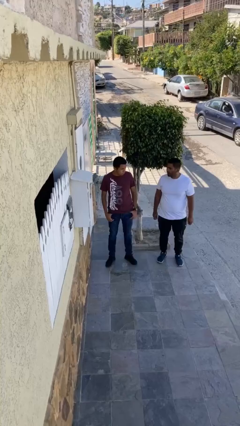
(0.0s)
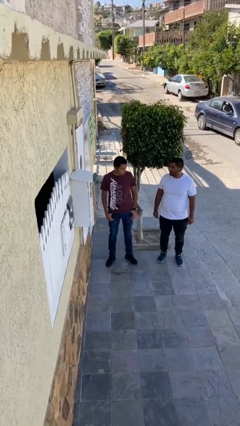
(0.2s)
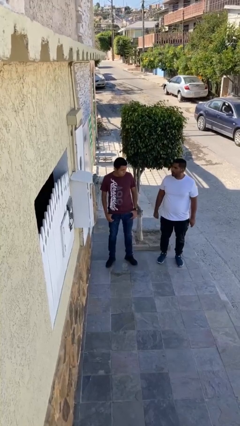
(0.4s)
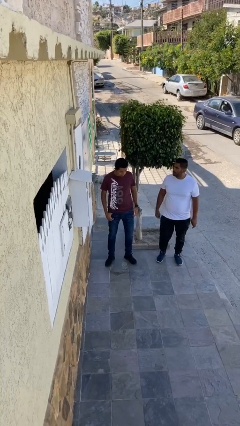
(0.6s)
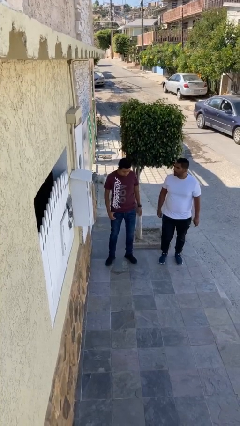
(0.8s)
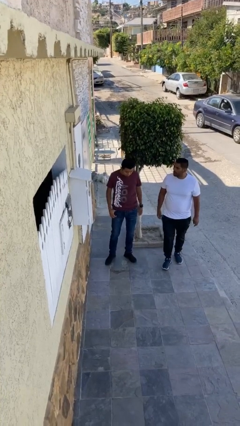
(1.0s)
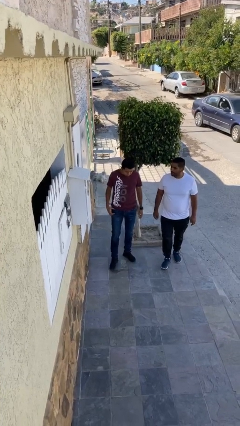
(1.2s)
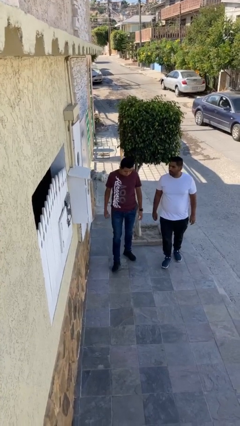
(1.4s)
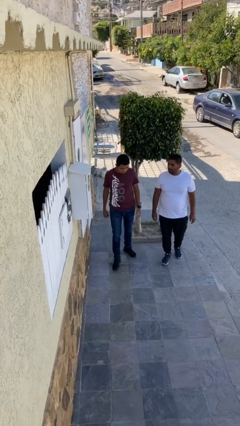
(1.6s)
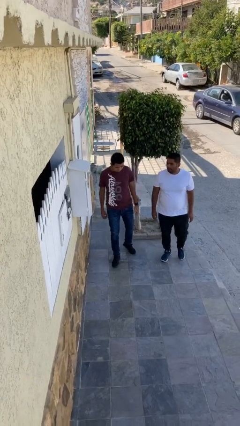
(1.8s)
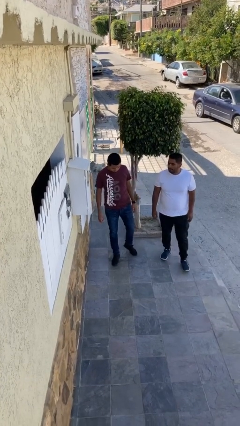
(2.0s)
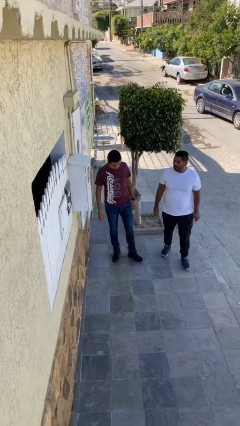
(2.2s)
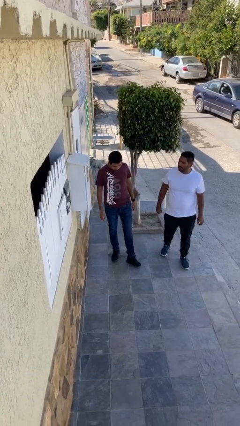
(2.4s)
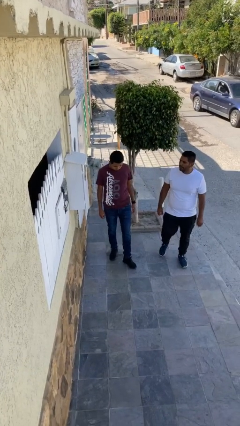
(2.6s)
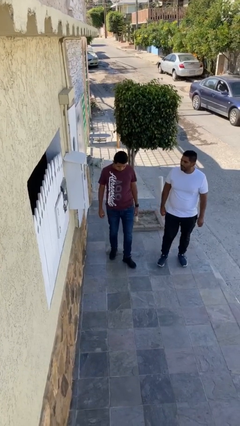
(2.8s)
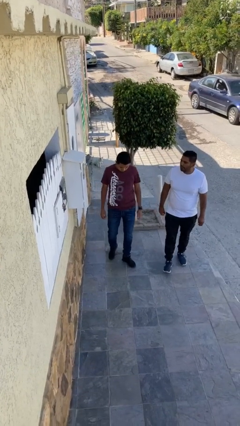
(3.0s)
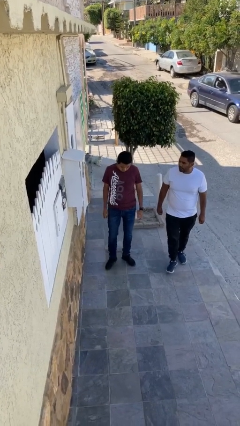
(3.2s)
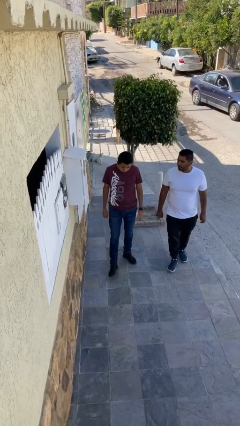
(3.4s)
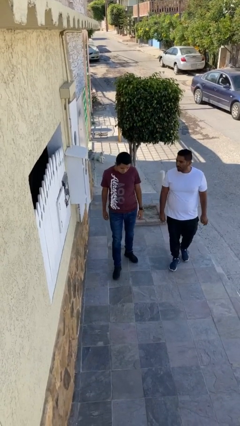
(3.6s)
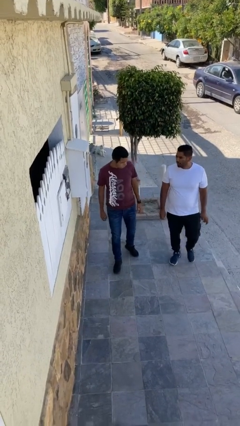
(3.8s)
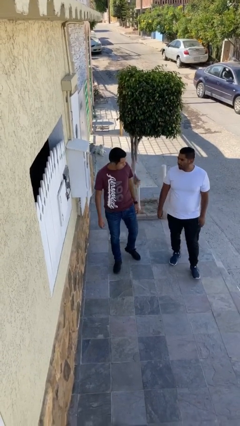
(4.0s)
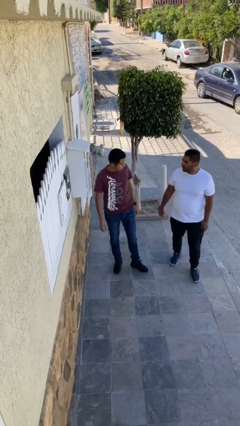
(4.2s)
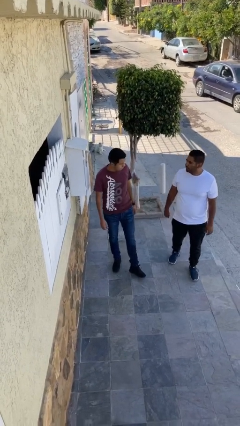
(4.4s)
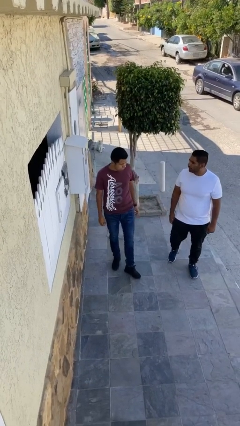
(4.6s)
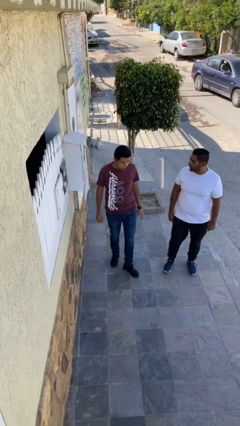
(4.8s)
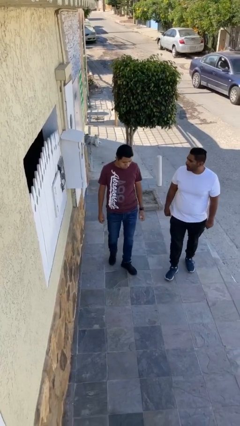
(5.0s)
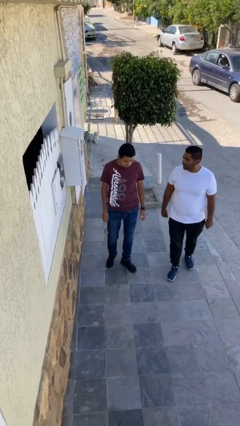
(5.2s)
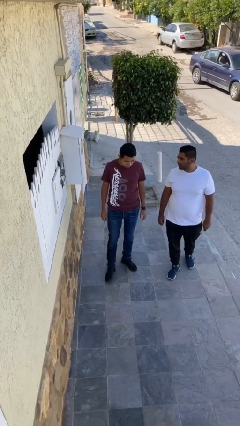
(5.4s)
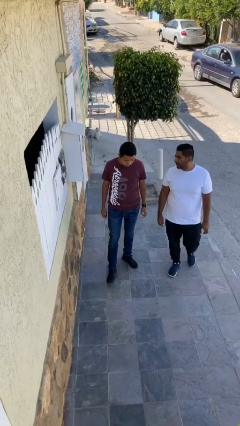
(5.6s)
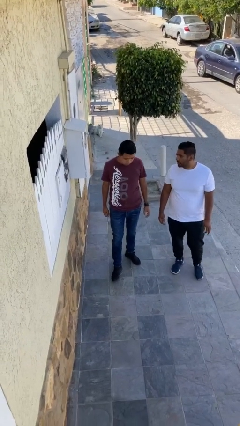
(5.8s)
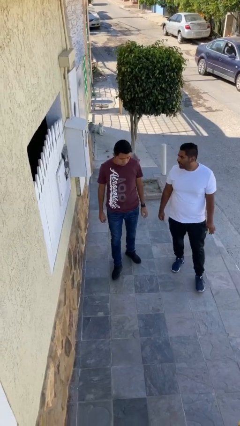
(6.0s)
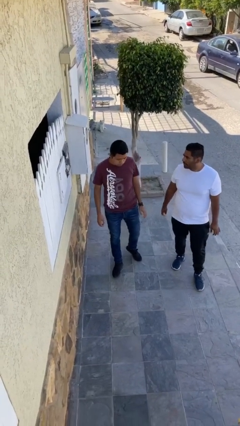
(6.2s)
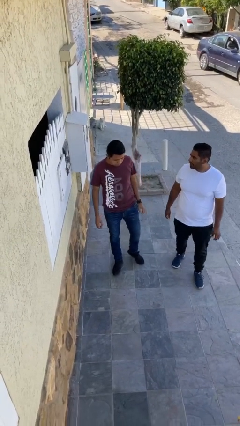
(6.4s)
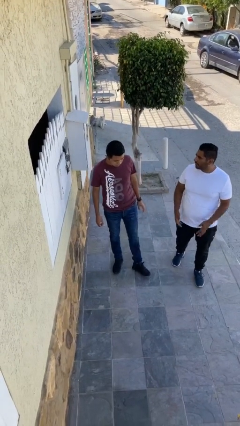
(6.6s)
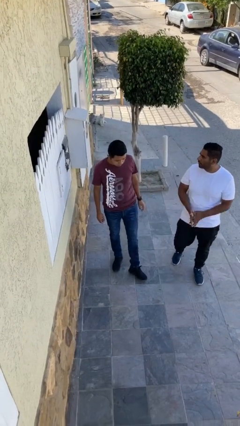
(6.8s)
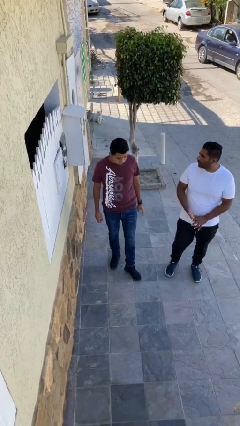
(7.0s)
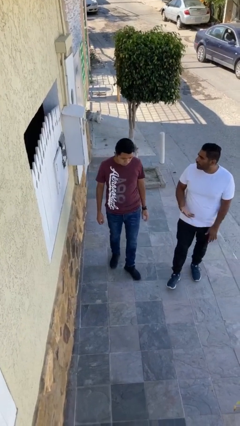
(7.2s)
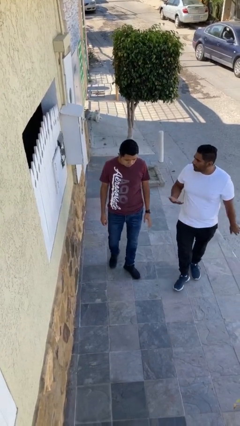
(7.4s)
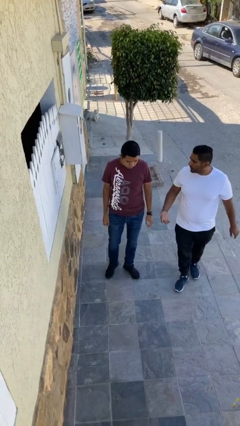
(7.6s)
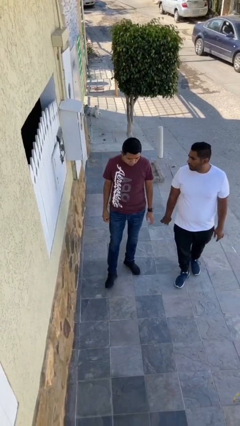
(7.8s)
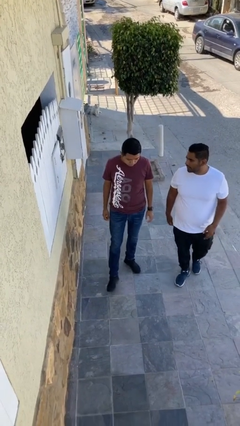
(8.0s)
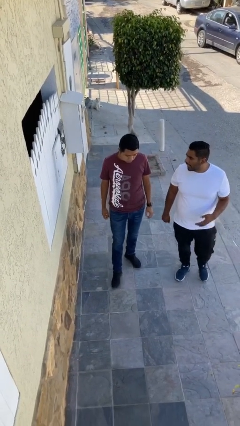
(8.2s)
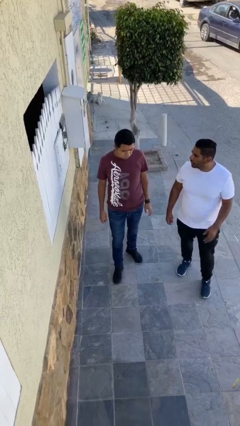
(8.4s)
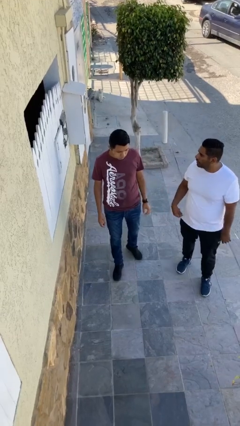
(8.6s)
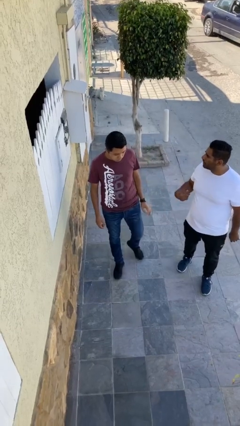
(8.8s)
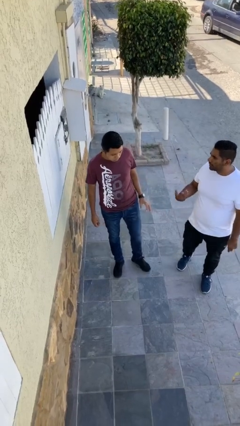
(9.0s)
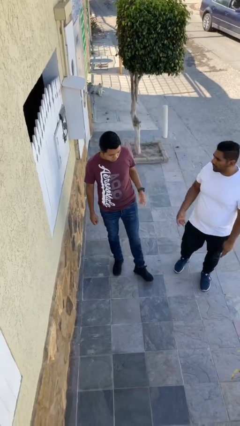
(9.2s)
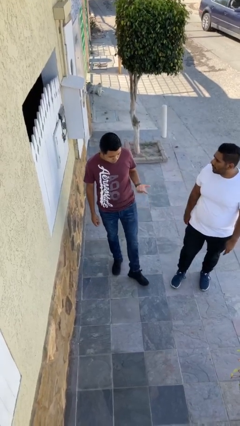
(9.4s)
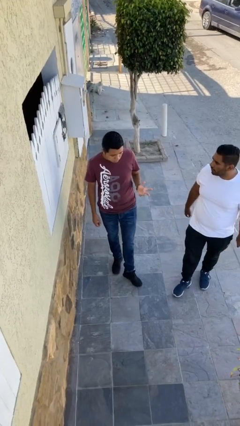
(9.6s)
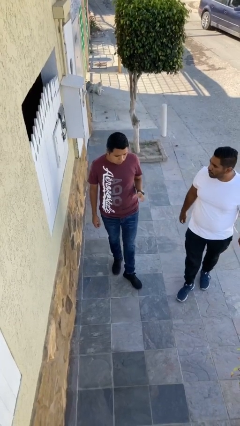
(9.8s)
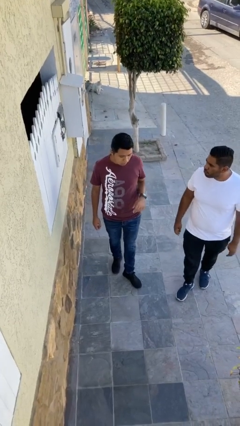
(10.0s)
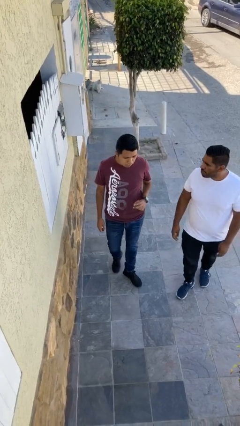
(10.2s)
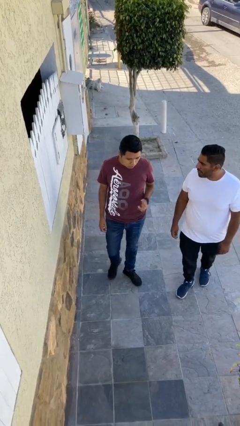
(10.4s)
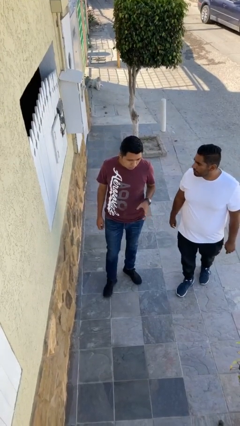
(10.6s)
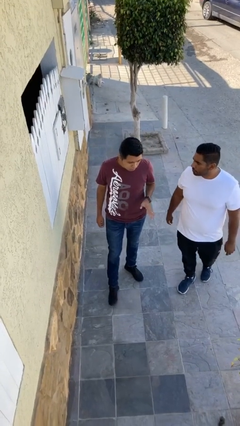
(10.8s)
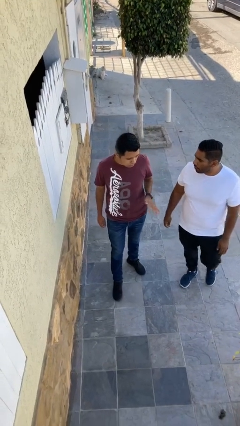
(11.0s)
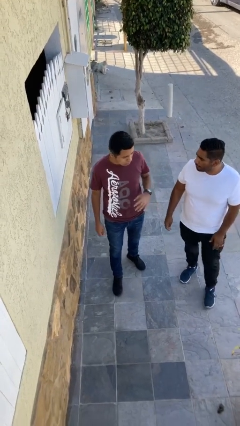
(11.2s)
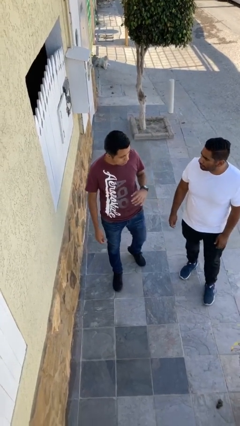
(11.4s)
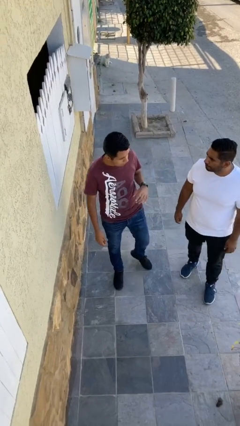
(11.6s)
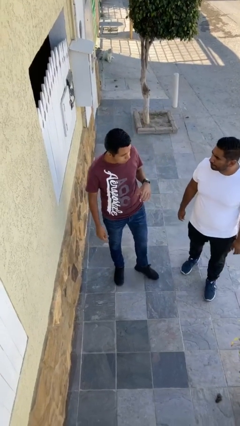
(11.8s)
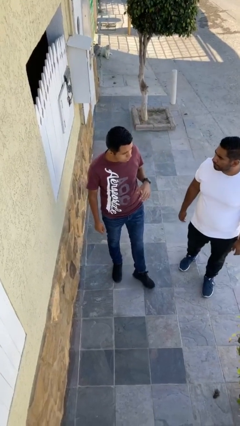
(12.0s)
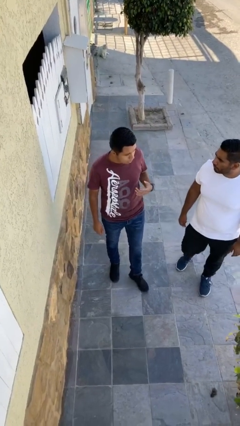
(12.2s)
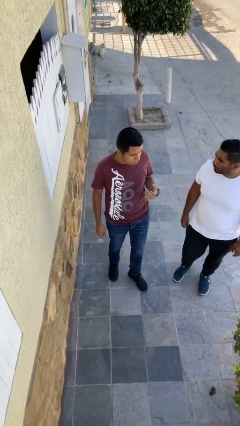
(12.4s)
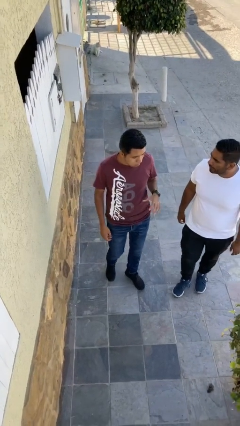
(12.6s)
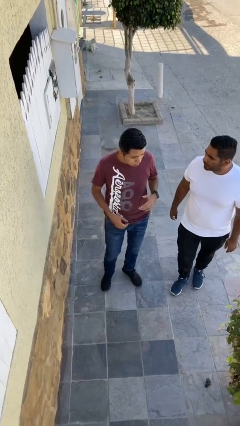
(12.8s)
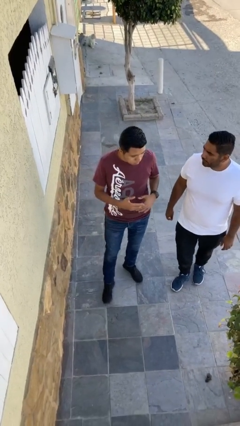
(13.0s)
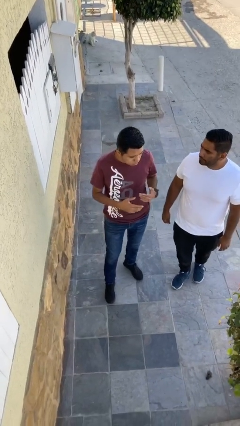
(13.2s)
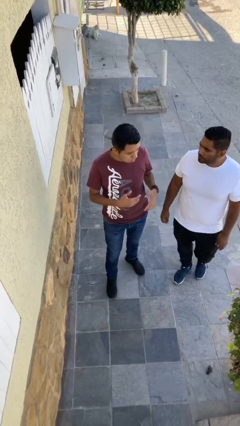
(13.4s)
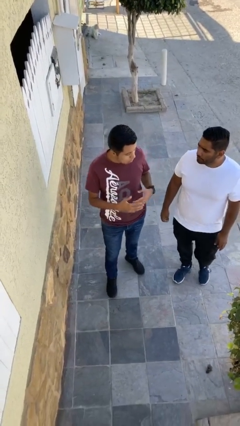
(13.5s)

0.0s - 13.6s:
person talks to person

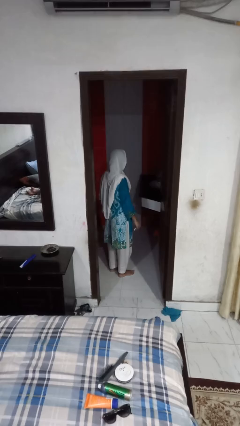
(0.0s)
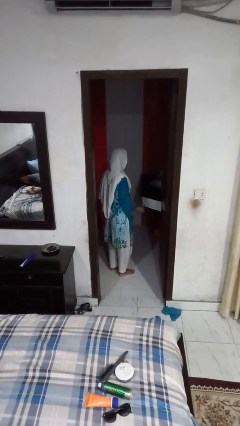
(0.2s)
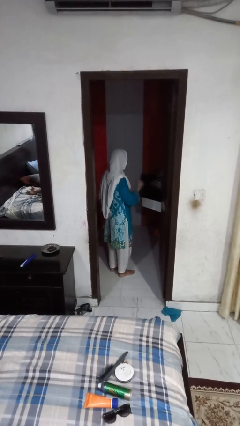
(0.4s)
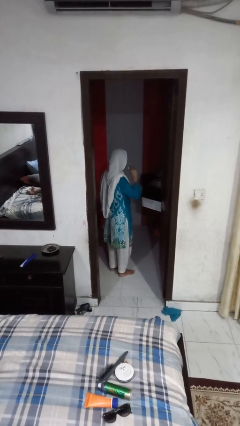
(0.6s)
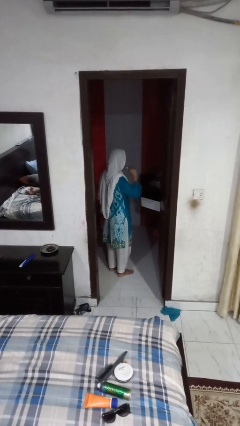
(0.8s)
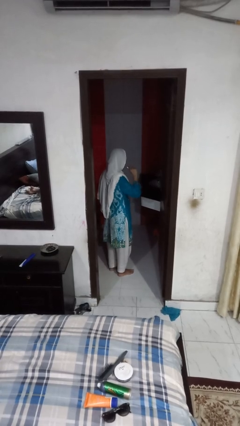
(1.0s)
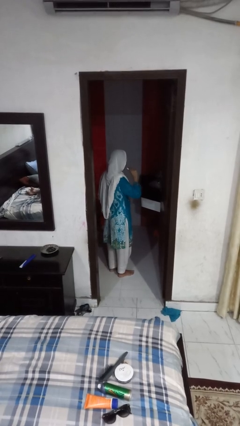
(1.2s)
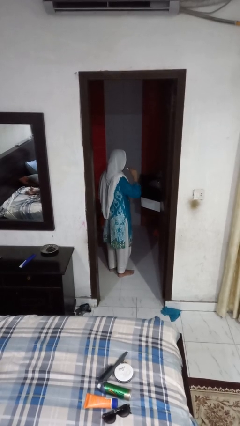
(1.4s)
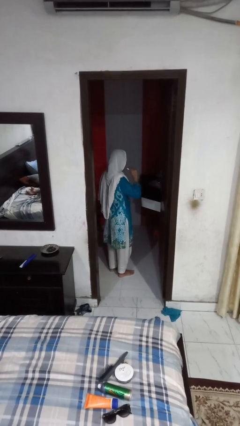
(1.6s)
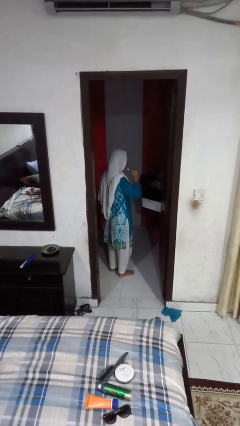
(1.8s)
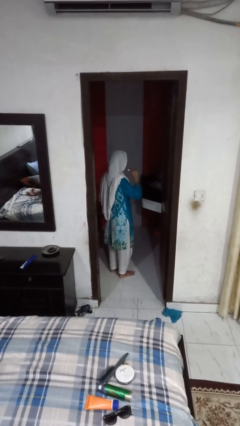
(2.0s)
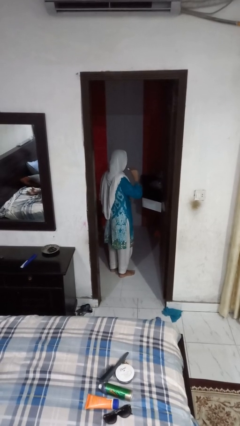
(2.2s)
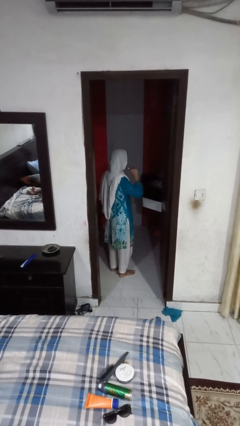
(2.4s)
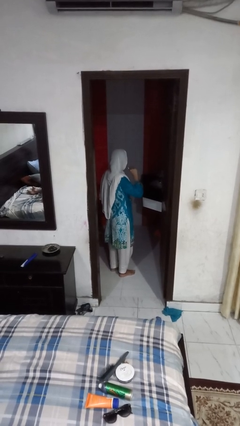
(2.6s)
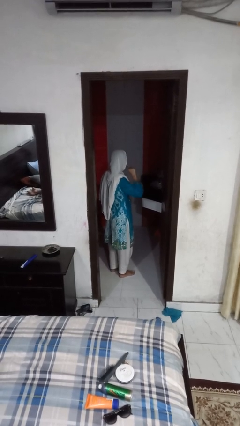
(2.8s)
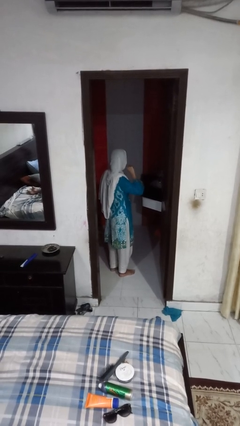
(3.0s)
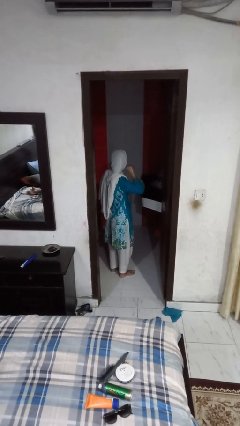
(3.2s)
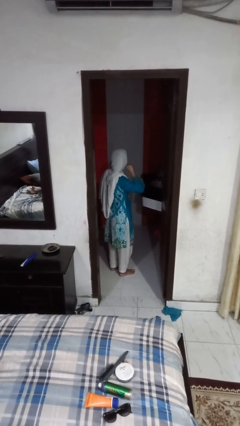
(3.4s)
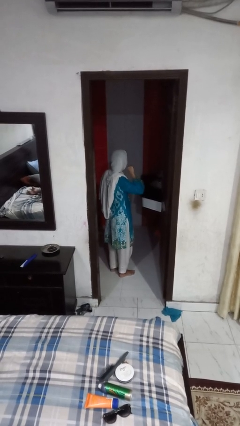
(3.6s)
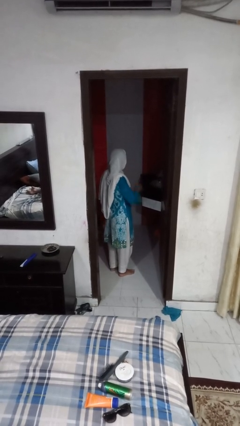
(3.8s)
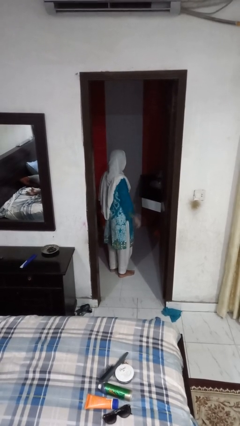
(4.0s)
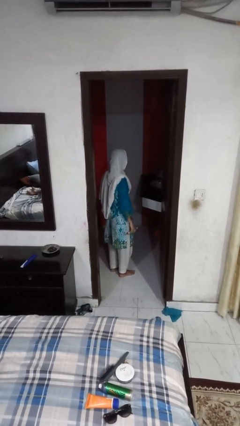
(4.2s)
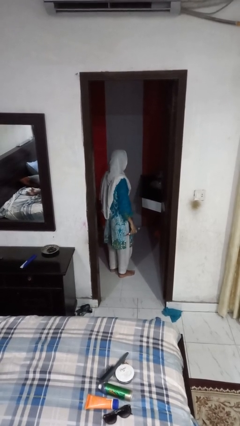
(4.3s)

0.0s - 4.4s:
person brushes teeth

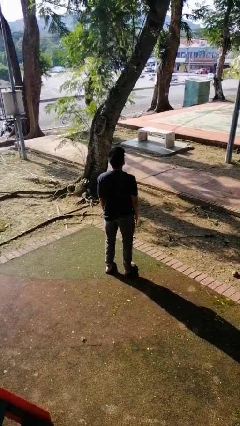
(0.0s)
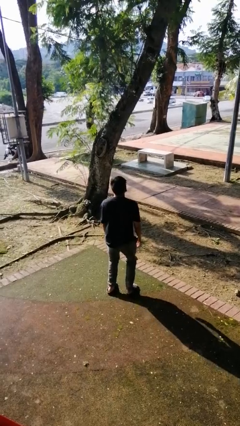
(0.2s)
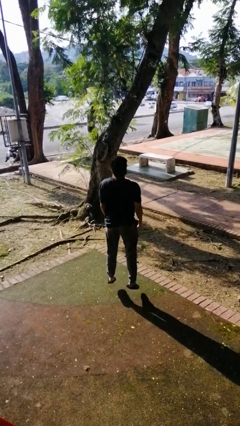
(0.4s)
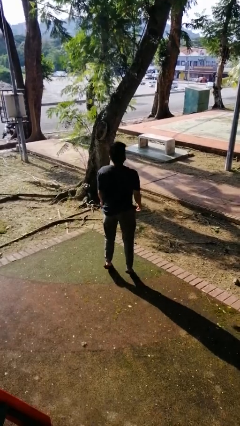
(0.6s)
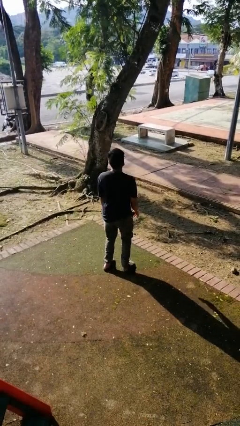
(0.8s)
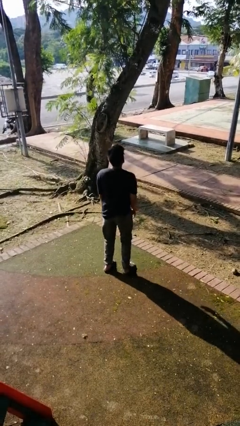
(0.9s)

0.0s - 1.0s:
person jumps
